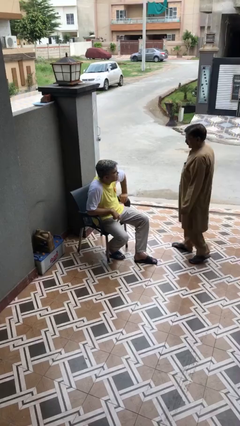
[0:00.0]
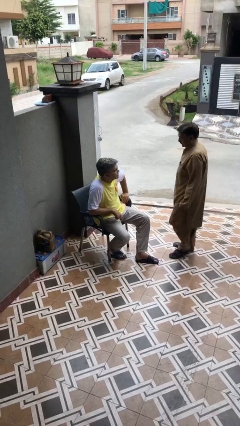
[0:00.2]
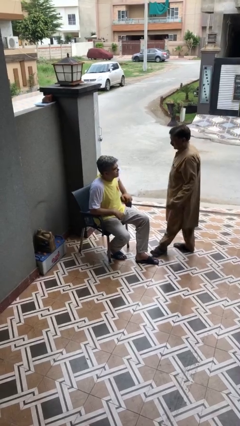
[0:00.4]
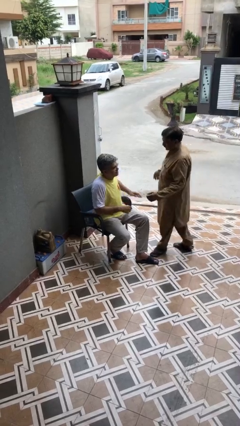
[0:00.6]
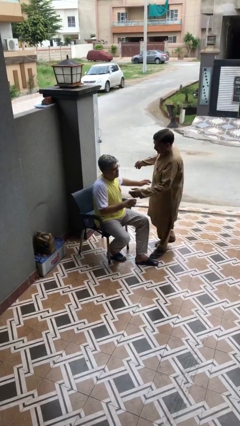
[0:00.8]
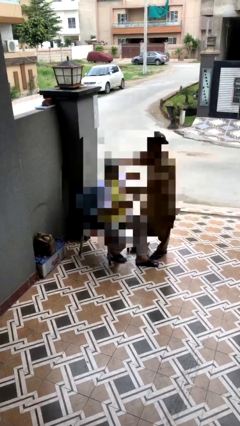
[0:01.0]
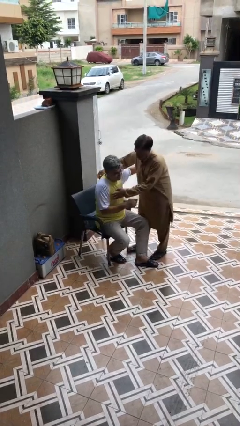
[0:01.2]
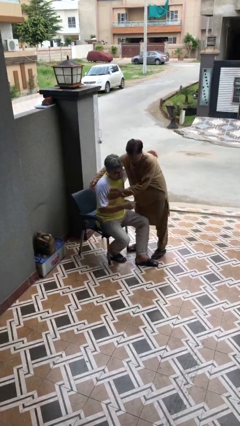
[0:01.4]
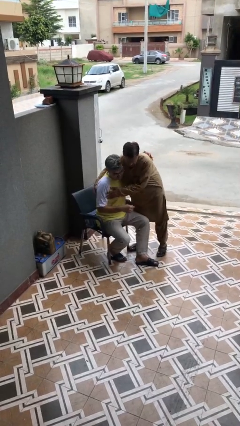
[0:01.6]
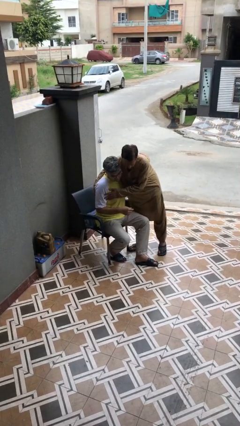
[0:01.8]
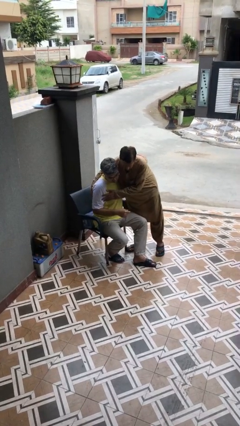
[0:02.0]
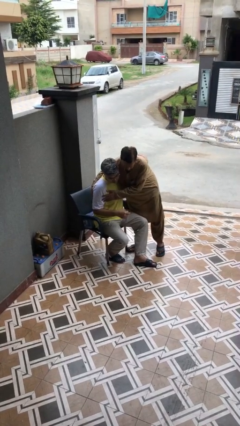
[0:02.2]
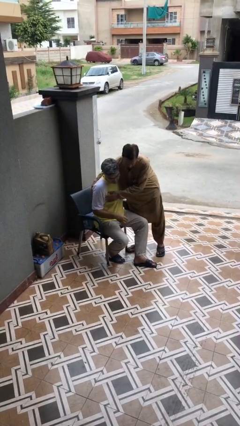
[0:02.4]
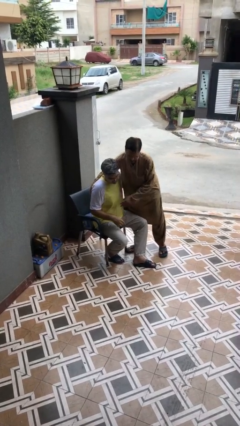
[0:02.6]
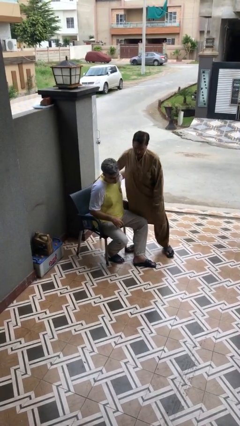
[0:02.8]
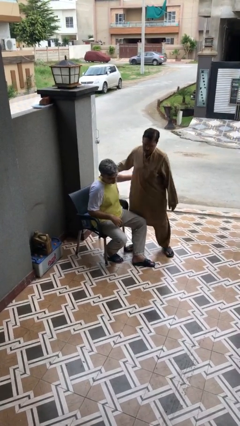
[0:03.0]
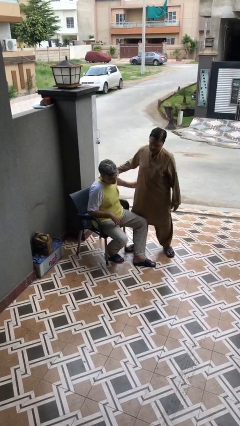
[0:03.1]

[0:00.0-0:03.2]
person embraces person

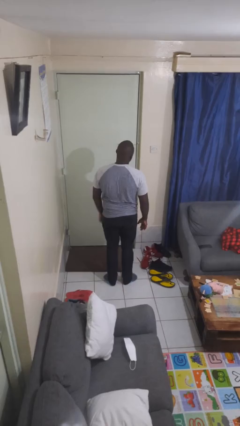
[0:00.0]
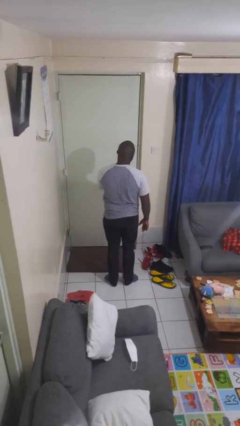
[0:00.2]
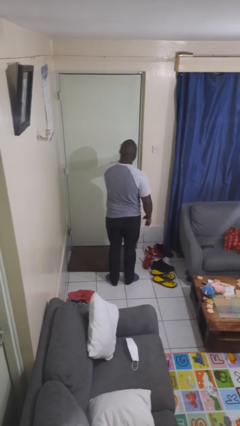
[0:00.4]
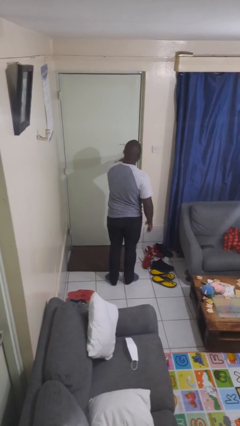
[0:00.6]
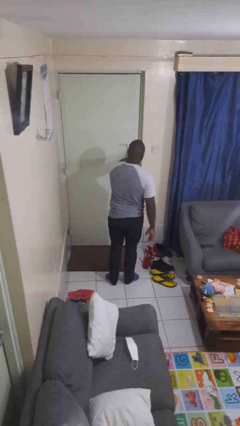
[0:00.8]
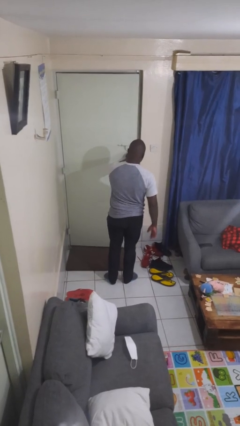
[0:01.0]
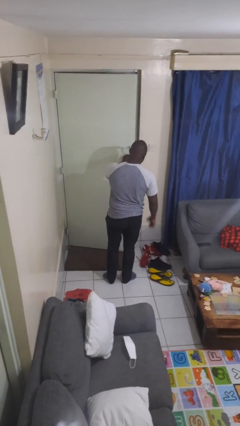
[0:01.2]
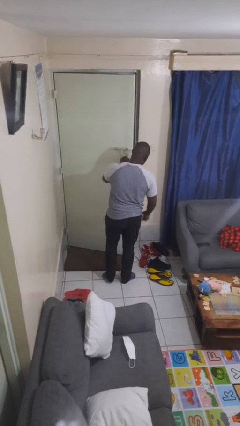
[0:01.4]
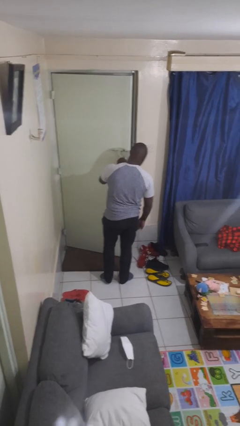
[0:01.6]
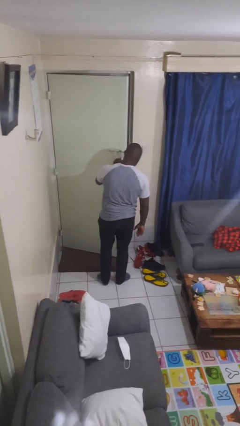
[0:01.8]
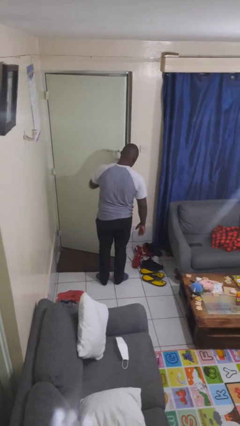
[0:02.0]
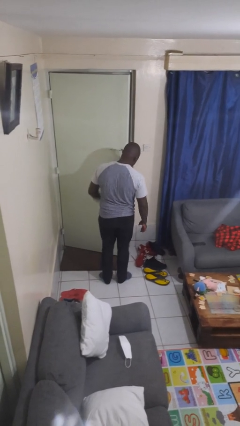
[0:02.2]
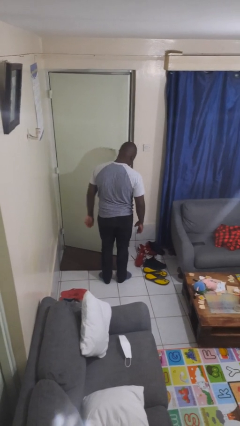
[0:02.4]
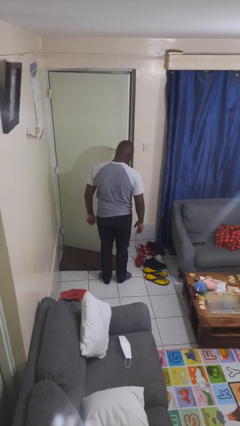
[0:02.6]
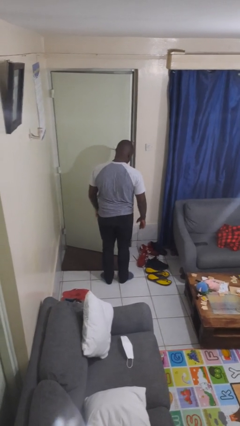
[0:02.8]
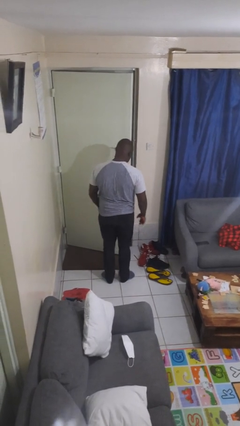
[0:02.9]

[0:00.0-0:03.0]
person opens facility door

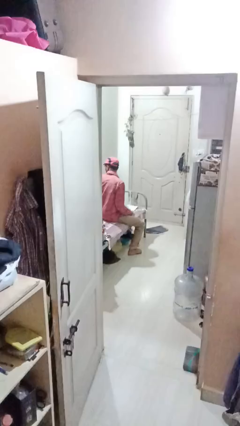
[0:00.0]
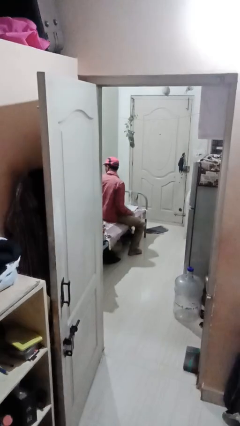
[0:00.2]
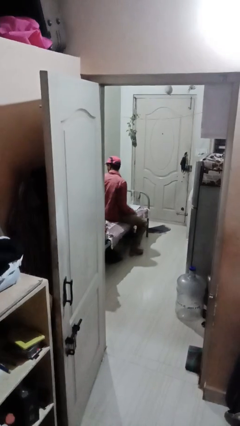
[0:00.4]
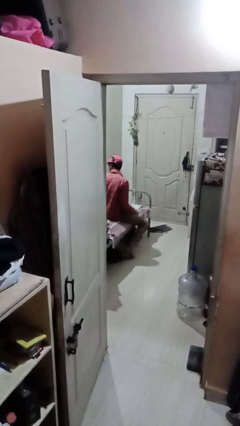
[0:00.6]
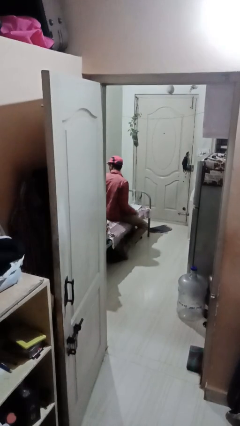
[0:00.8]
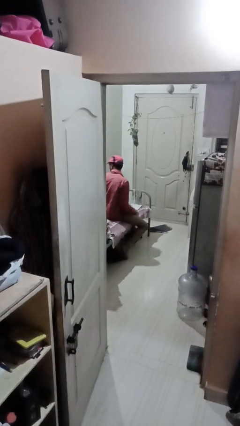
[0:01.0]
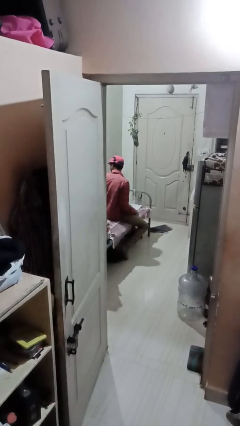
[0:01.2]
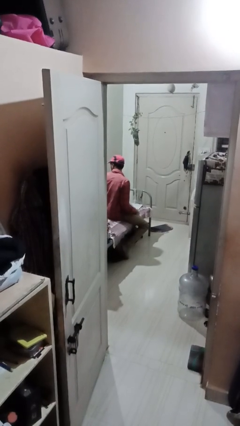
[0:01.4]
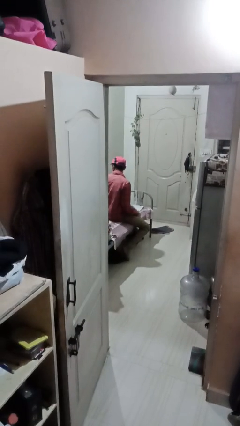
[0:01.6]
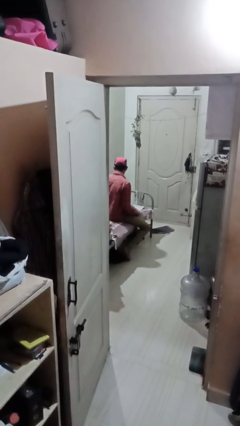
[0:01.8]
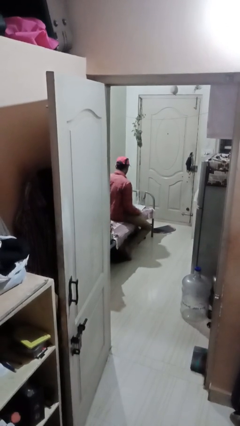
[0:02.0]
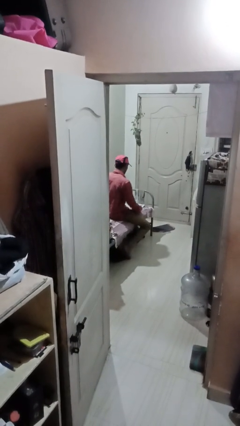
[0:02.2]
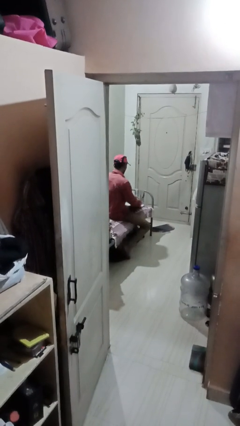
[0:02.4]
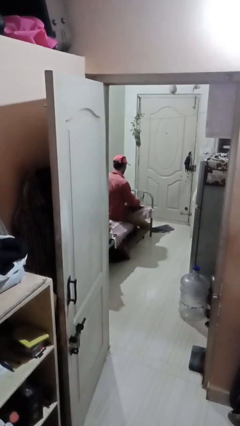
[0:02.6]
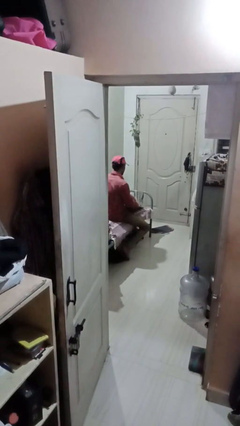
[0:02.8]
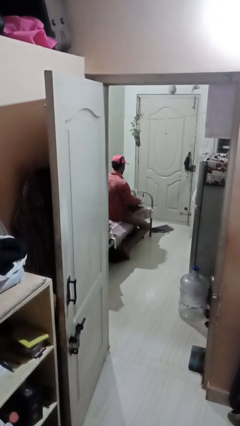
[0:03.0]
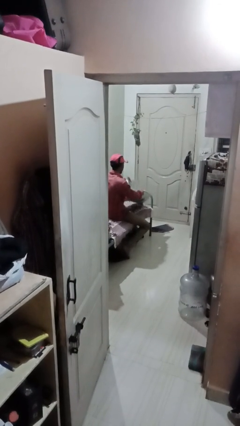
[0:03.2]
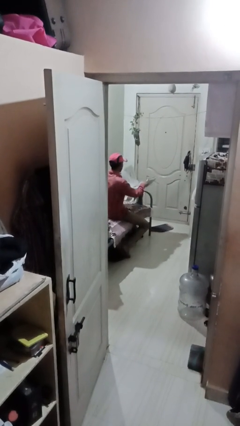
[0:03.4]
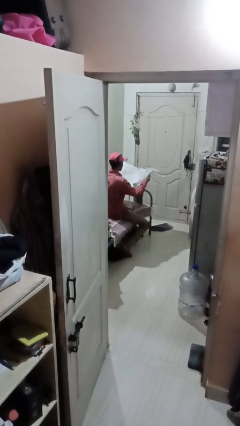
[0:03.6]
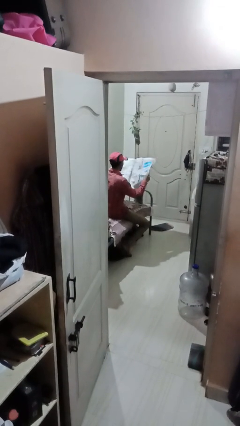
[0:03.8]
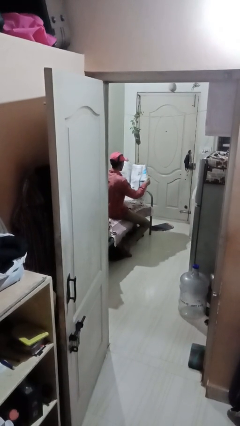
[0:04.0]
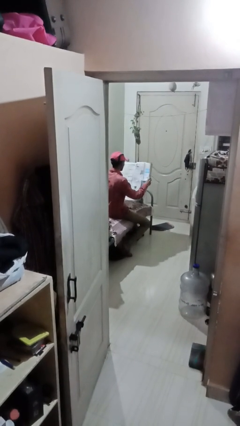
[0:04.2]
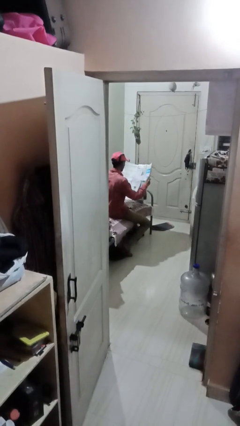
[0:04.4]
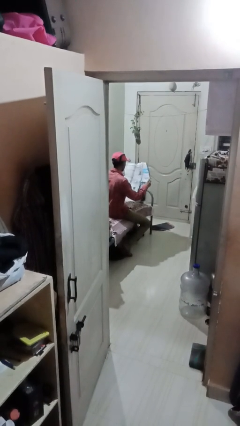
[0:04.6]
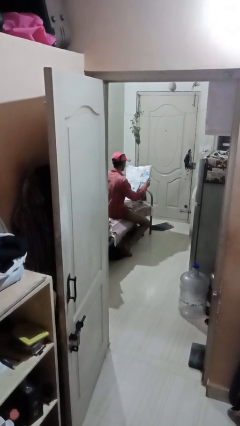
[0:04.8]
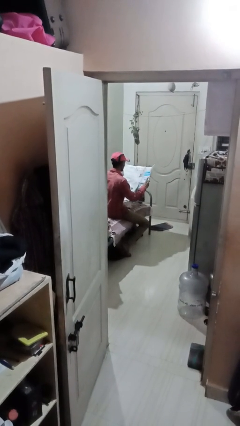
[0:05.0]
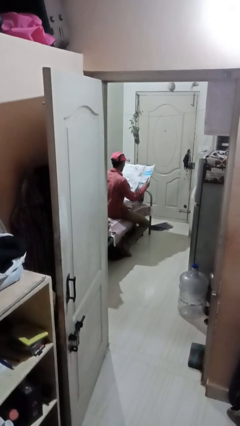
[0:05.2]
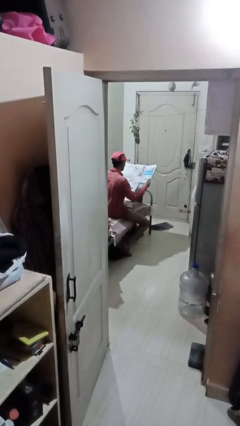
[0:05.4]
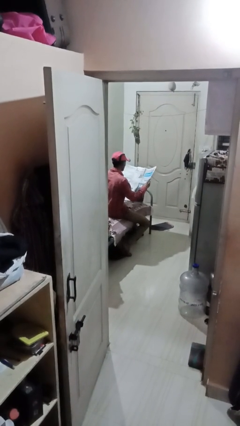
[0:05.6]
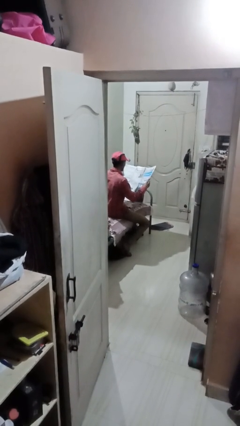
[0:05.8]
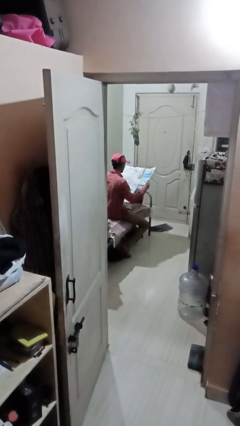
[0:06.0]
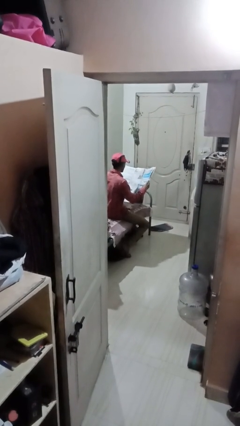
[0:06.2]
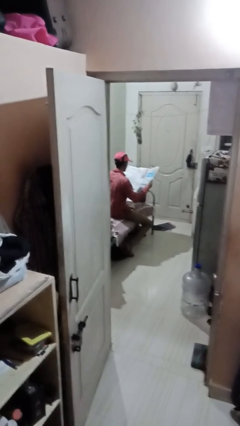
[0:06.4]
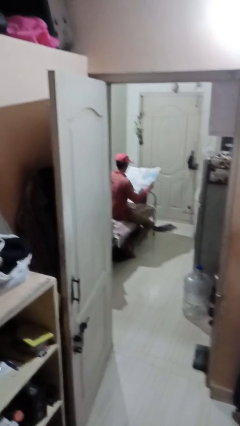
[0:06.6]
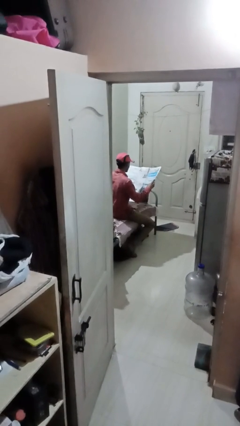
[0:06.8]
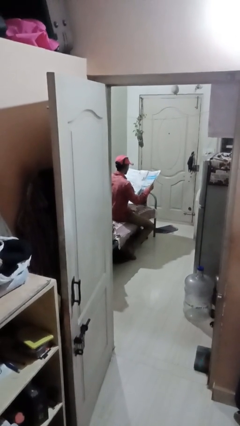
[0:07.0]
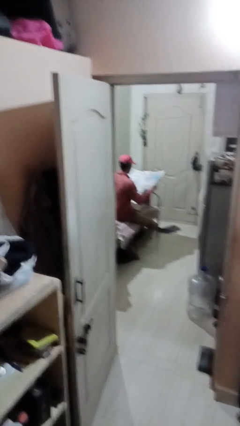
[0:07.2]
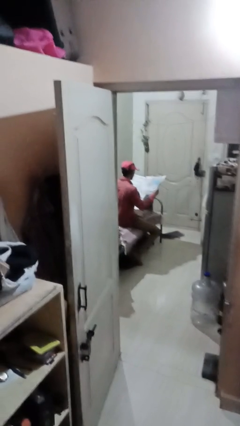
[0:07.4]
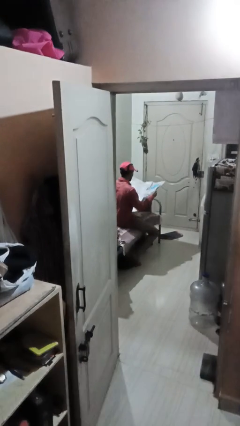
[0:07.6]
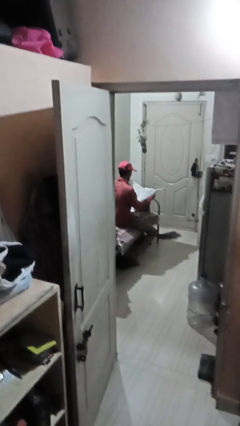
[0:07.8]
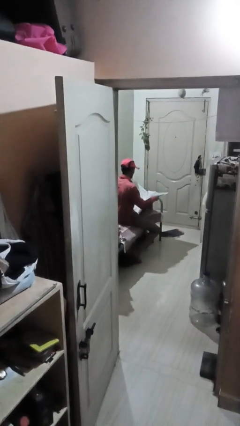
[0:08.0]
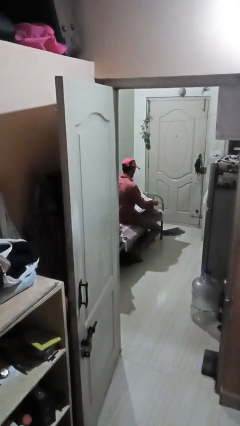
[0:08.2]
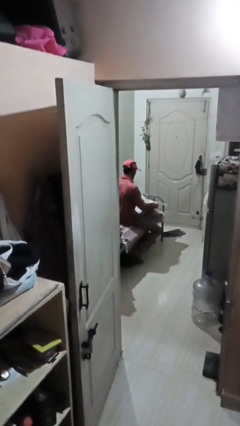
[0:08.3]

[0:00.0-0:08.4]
person reads newspaper

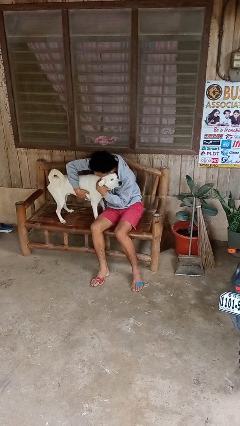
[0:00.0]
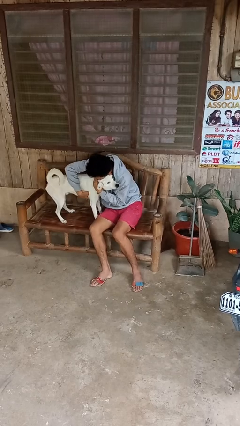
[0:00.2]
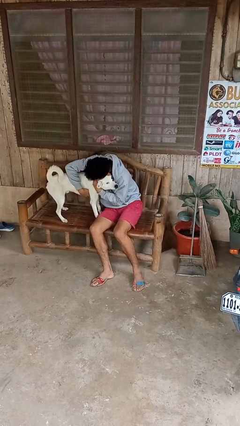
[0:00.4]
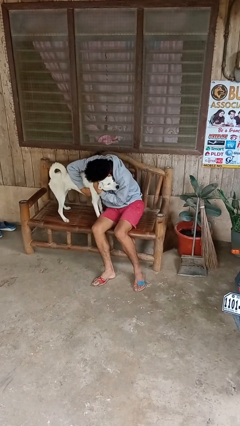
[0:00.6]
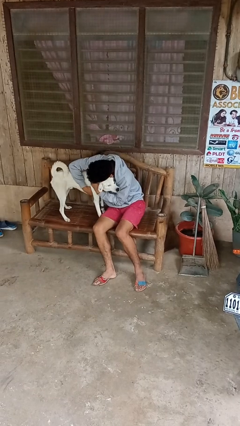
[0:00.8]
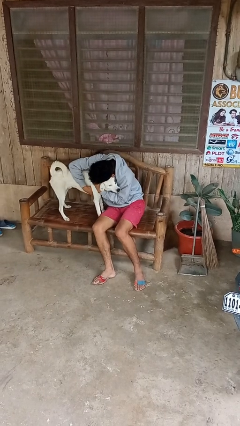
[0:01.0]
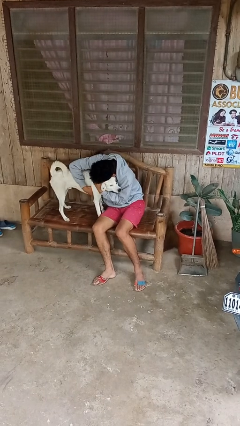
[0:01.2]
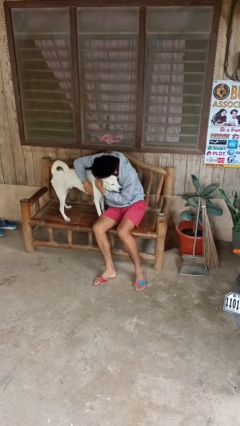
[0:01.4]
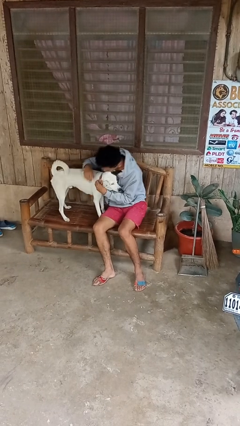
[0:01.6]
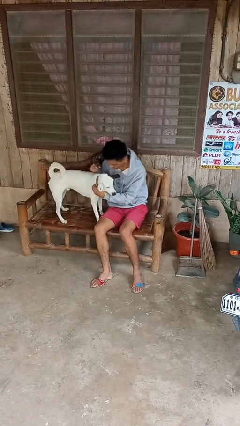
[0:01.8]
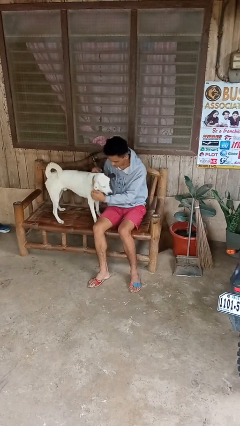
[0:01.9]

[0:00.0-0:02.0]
person hugs dog

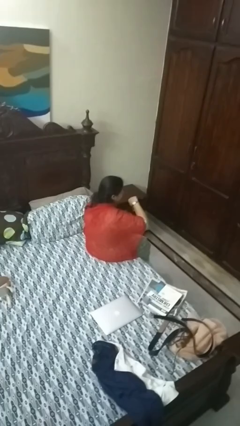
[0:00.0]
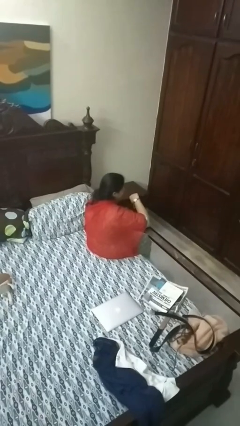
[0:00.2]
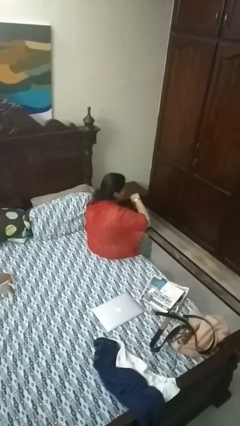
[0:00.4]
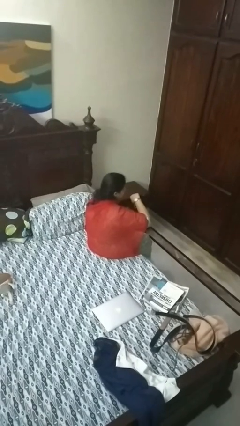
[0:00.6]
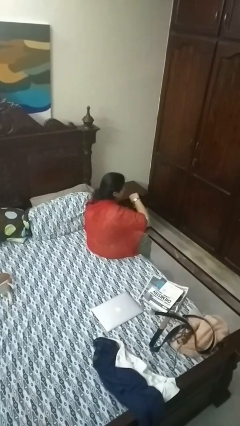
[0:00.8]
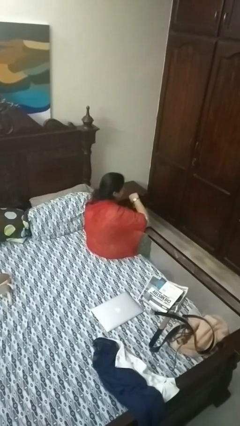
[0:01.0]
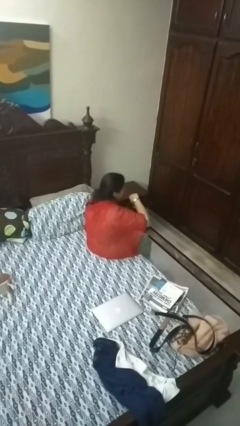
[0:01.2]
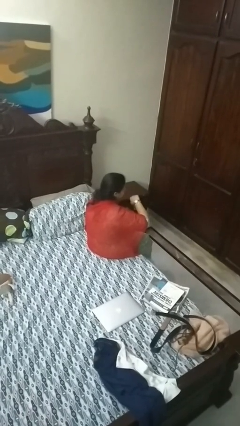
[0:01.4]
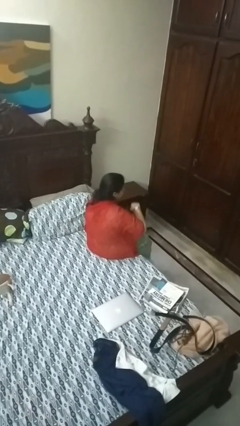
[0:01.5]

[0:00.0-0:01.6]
person looks at wristwatch
